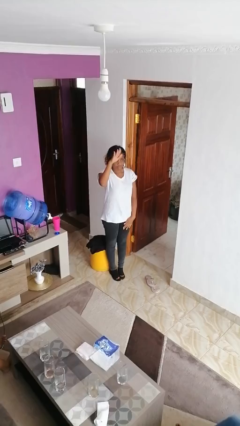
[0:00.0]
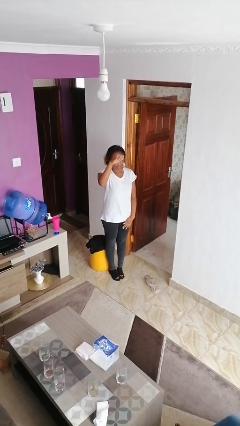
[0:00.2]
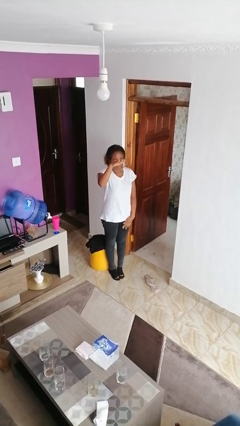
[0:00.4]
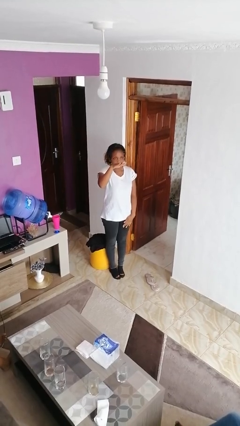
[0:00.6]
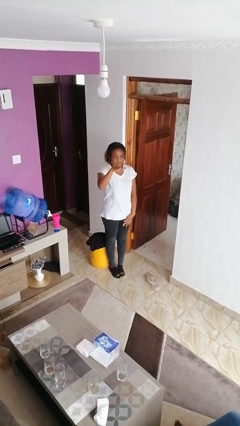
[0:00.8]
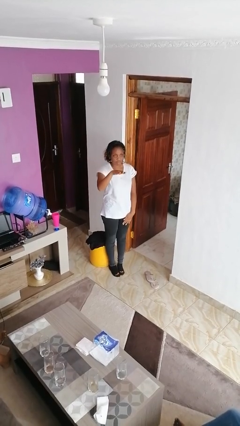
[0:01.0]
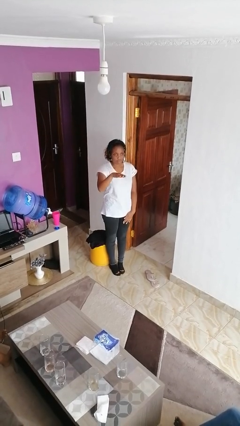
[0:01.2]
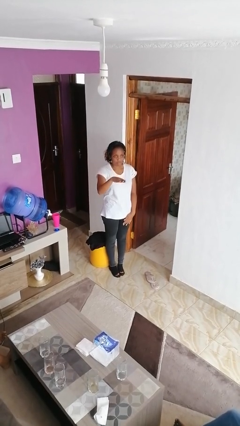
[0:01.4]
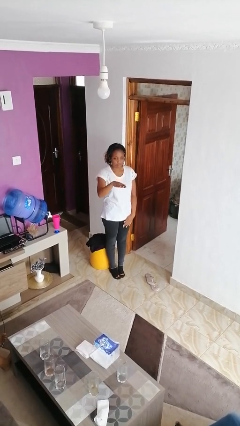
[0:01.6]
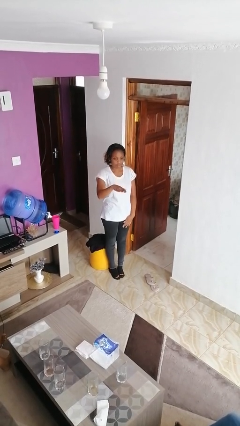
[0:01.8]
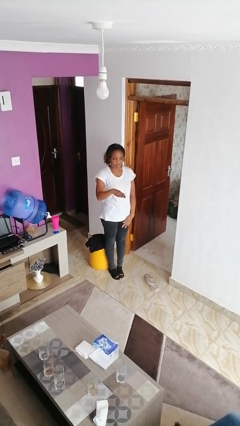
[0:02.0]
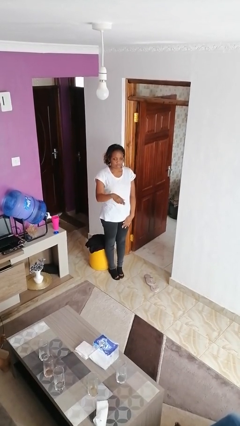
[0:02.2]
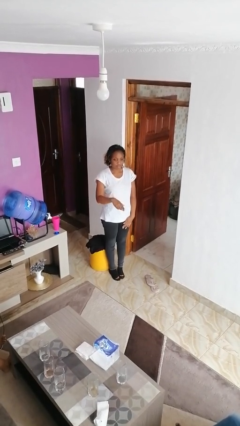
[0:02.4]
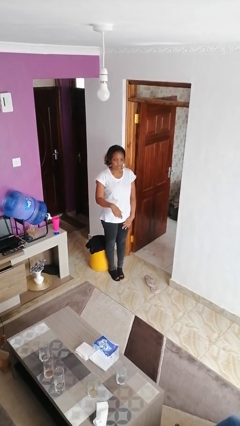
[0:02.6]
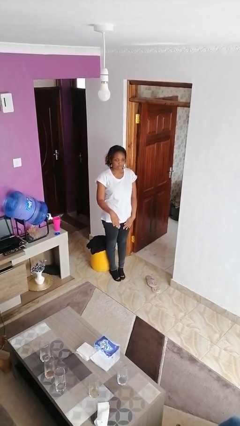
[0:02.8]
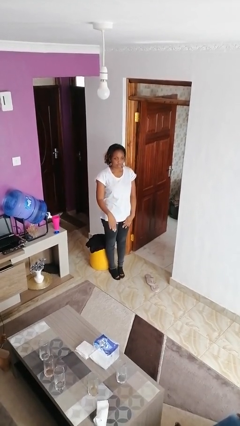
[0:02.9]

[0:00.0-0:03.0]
person gestures swipe down

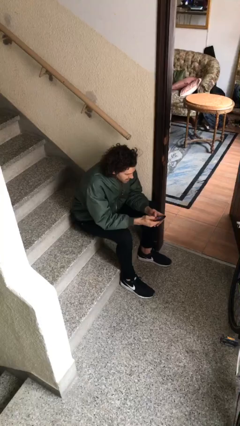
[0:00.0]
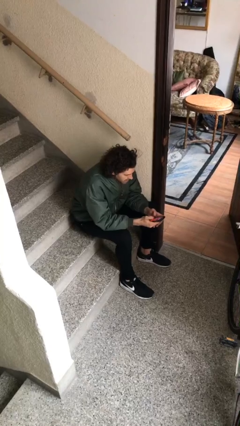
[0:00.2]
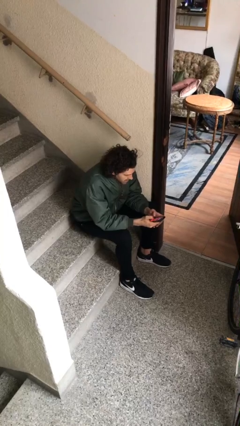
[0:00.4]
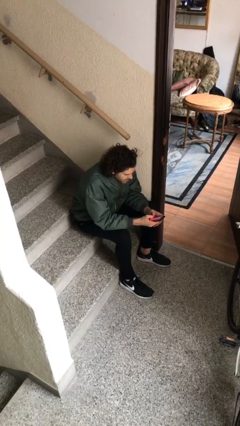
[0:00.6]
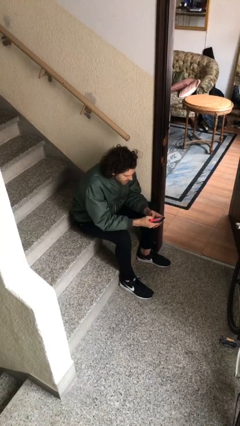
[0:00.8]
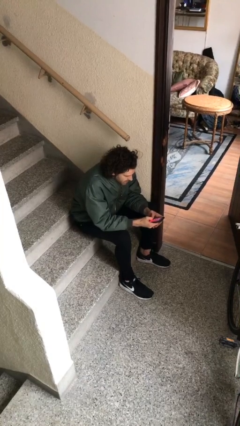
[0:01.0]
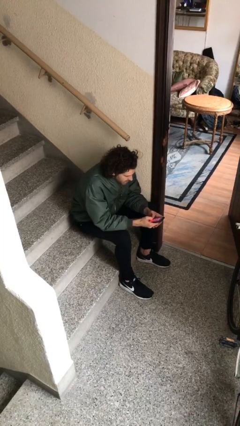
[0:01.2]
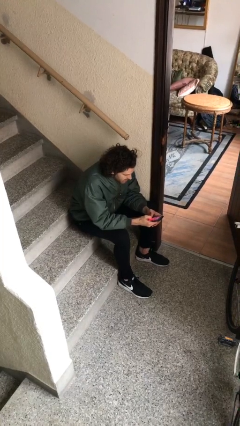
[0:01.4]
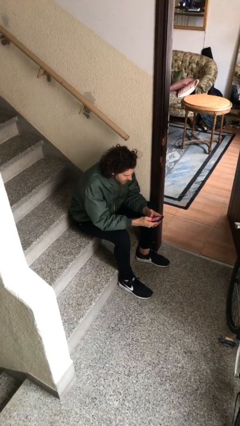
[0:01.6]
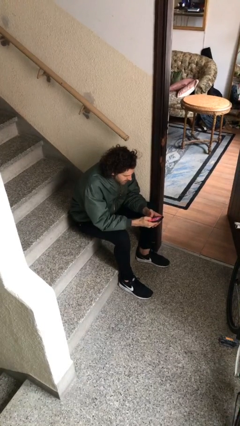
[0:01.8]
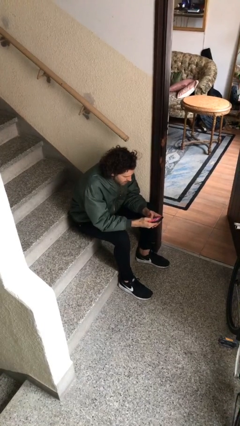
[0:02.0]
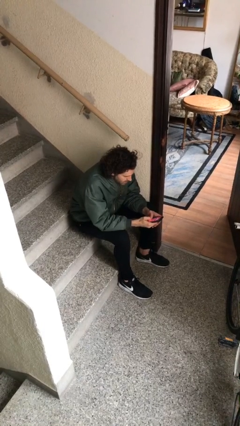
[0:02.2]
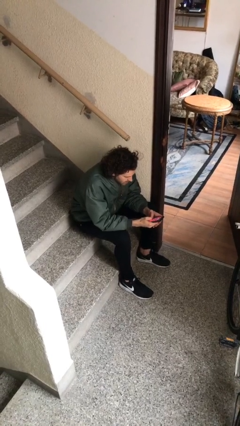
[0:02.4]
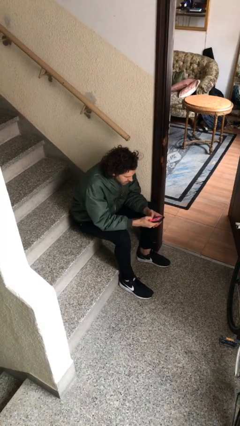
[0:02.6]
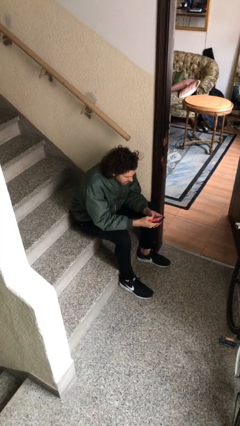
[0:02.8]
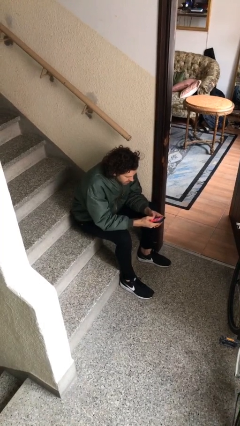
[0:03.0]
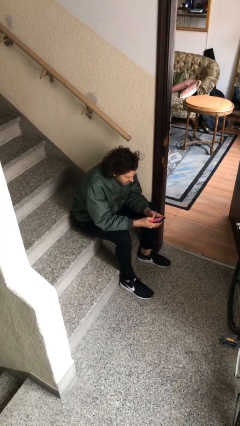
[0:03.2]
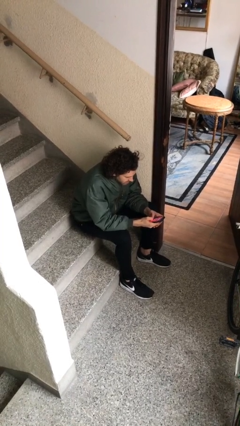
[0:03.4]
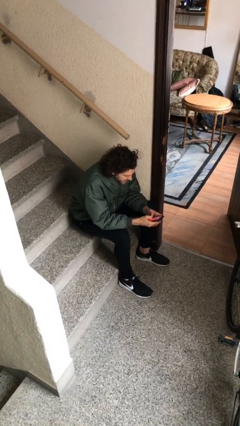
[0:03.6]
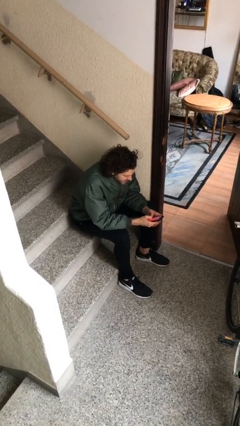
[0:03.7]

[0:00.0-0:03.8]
person texts on phone

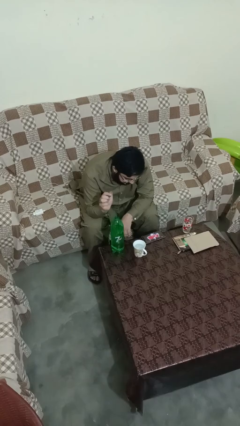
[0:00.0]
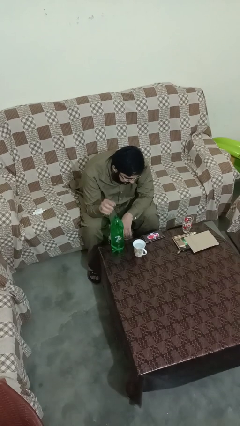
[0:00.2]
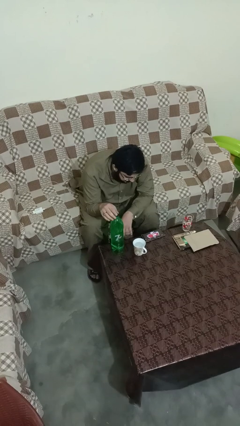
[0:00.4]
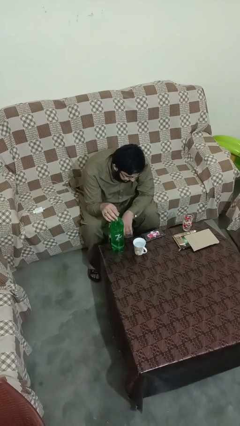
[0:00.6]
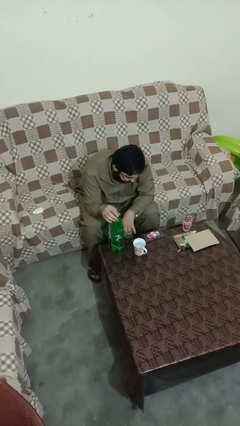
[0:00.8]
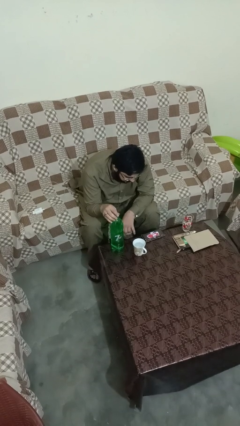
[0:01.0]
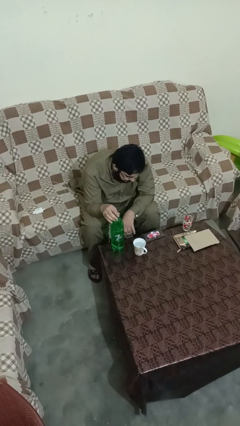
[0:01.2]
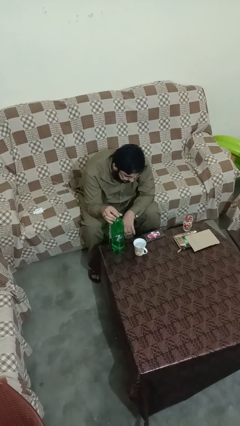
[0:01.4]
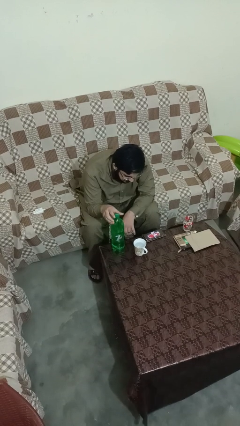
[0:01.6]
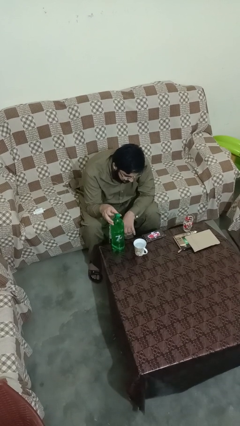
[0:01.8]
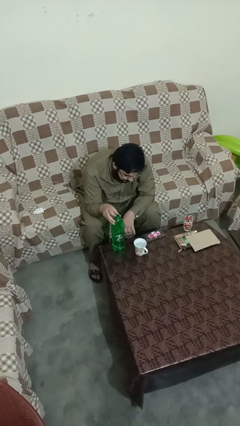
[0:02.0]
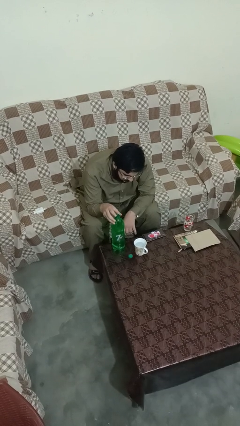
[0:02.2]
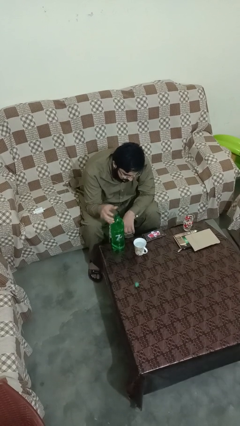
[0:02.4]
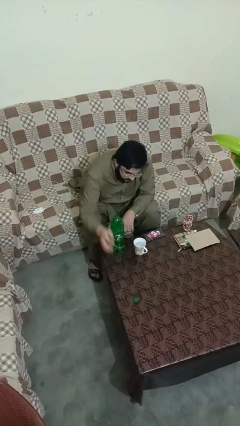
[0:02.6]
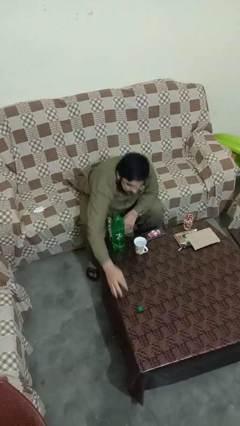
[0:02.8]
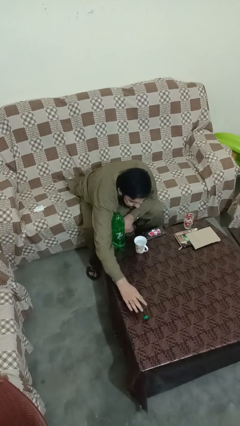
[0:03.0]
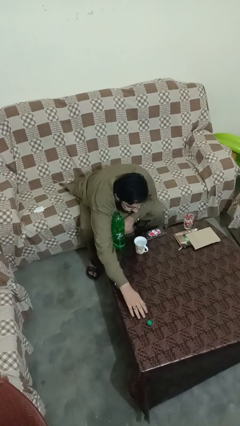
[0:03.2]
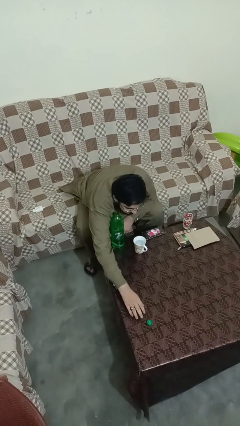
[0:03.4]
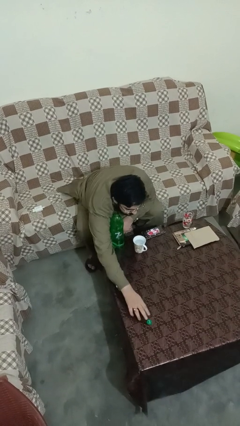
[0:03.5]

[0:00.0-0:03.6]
person screws lid to bottle

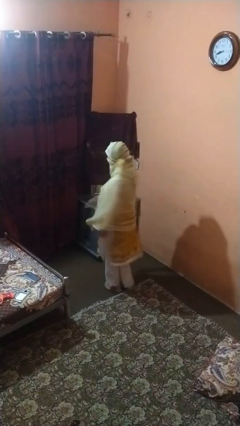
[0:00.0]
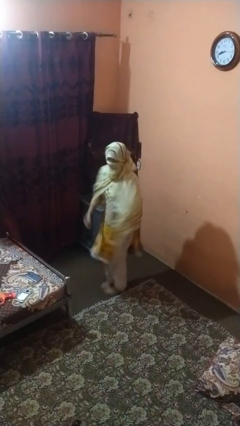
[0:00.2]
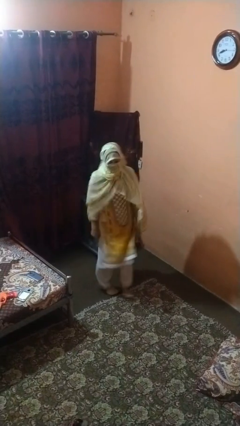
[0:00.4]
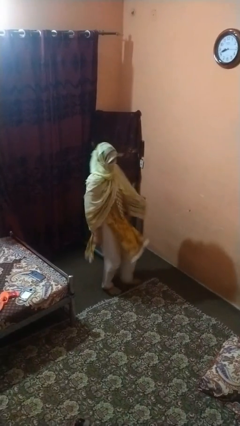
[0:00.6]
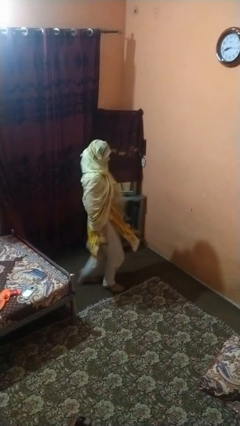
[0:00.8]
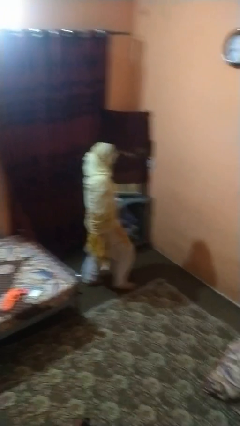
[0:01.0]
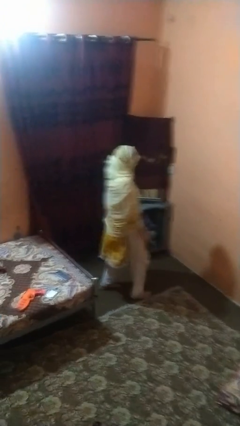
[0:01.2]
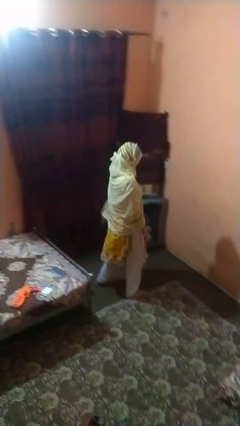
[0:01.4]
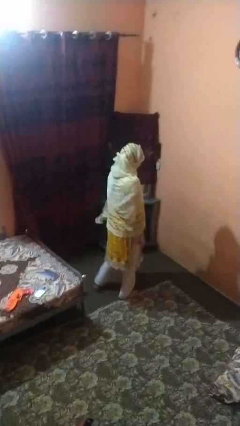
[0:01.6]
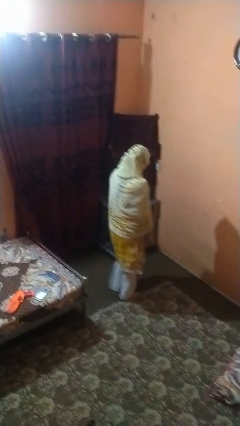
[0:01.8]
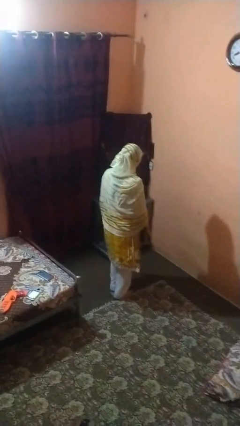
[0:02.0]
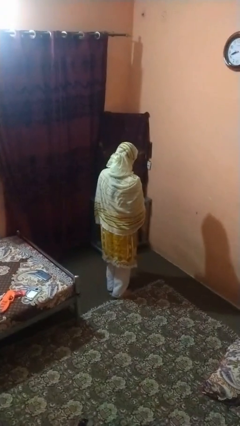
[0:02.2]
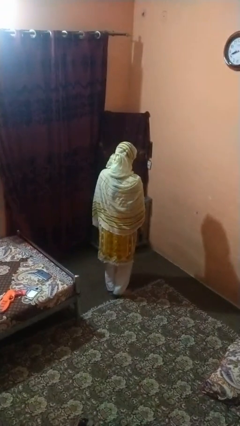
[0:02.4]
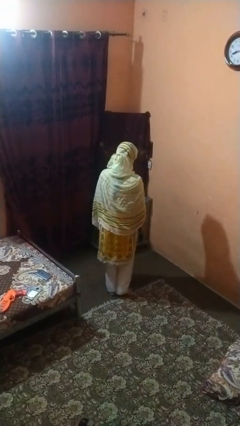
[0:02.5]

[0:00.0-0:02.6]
person twirls

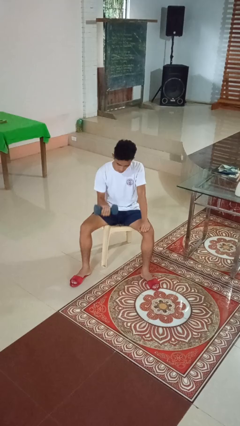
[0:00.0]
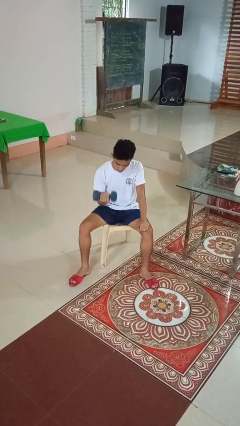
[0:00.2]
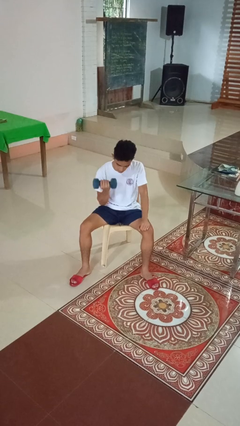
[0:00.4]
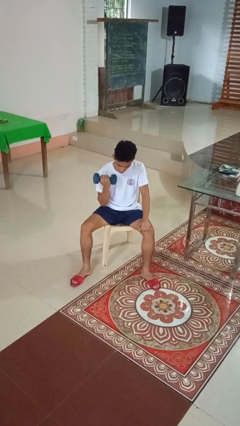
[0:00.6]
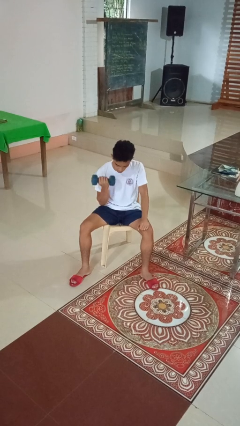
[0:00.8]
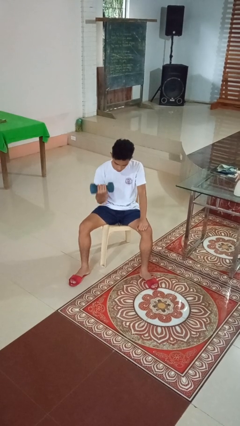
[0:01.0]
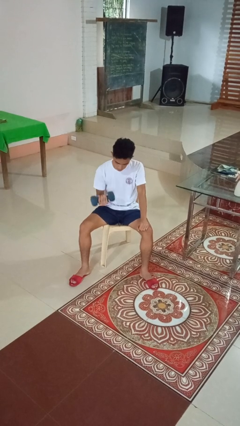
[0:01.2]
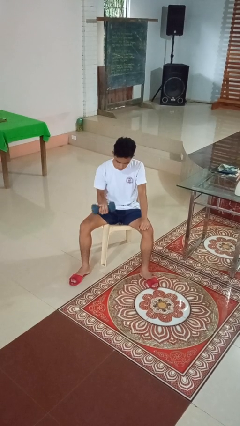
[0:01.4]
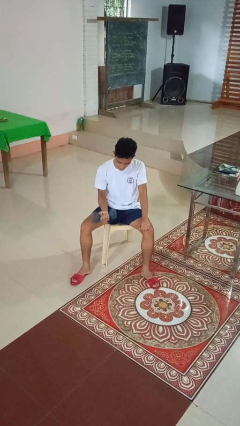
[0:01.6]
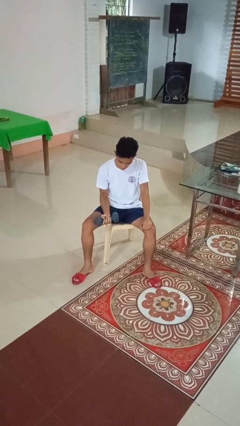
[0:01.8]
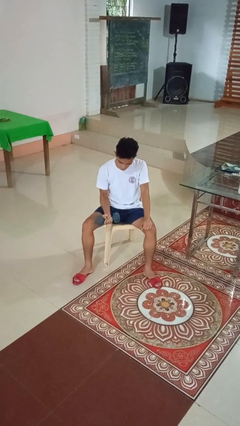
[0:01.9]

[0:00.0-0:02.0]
person lifts dumbbells

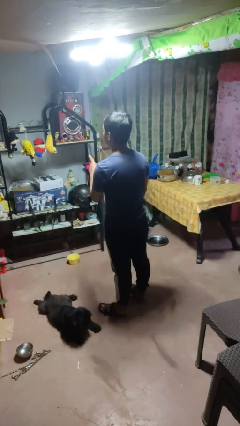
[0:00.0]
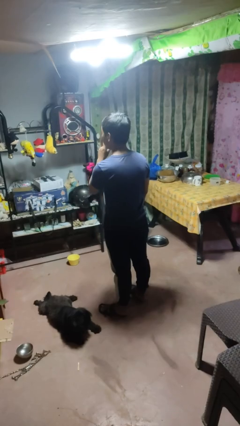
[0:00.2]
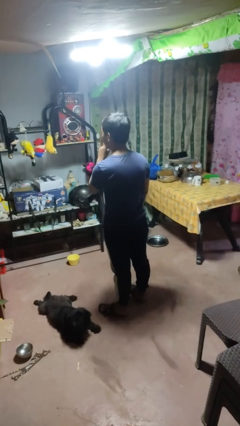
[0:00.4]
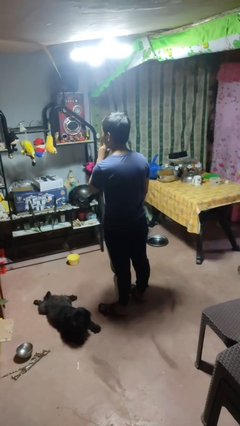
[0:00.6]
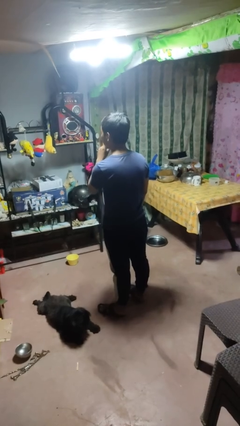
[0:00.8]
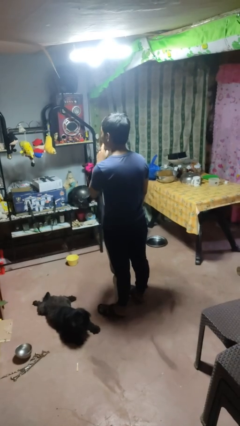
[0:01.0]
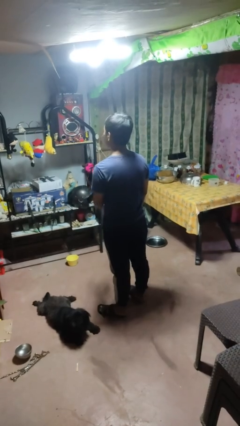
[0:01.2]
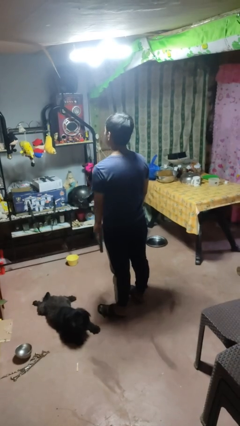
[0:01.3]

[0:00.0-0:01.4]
person gestures be quiet
